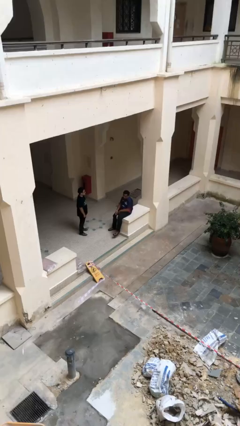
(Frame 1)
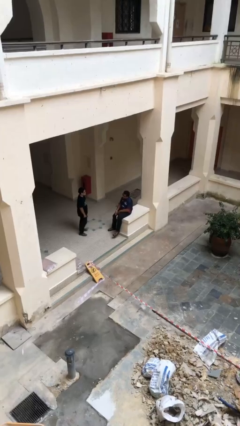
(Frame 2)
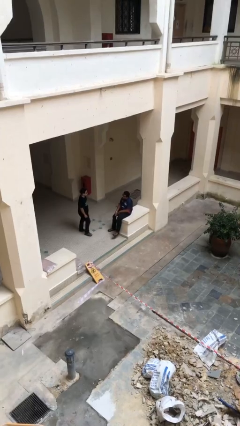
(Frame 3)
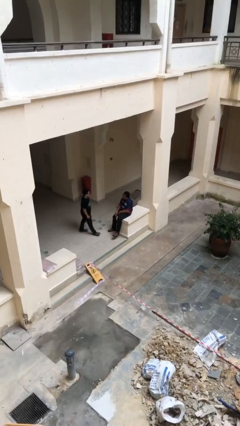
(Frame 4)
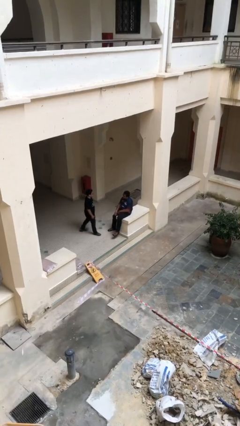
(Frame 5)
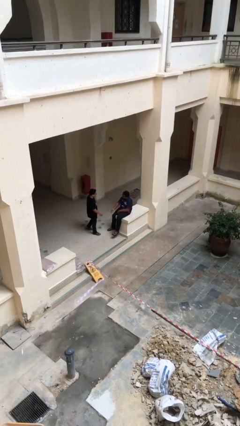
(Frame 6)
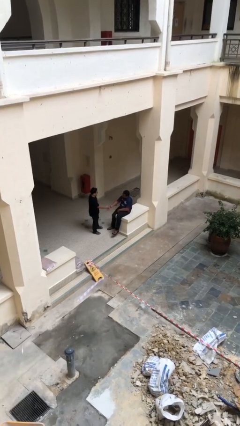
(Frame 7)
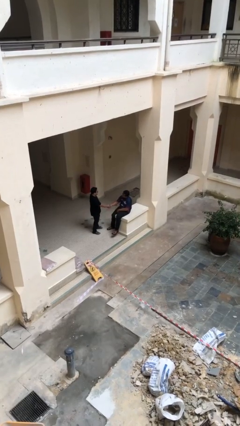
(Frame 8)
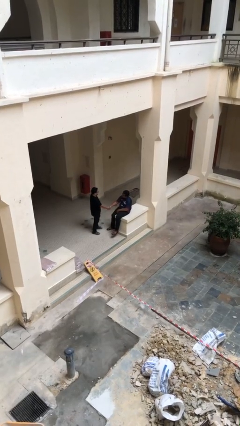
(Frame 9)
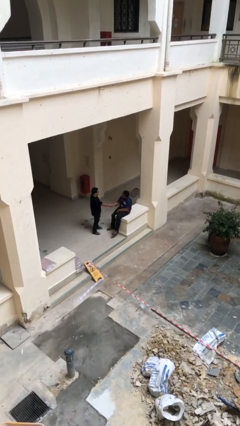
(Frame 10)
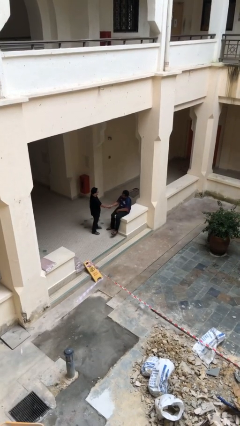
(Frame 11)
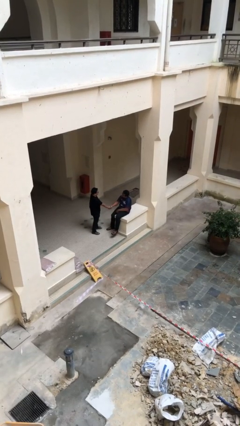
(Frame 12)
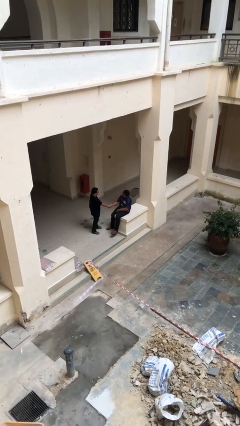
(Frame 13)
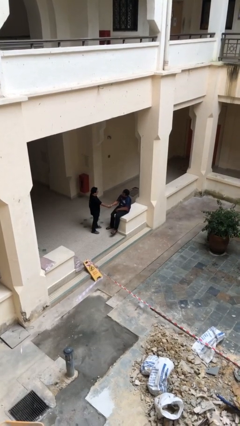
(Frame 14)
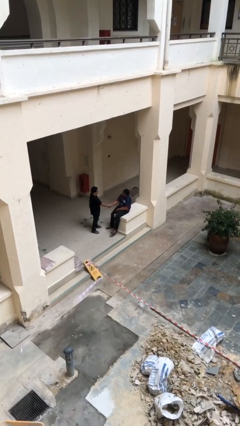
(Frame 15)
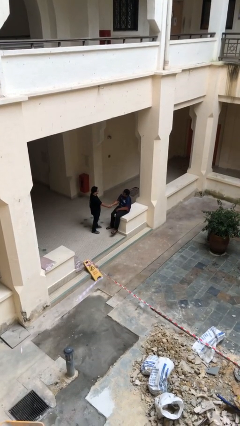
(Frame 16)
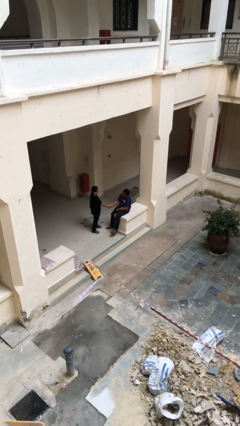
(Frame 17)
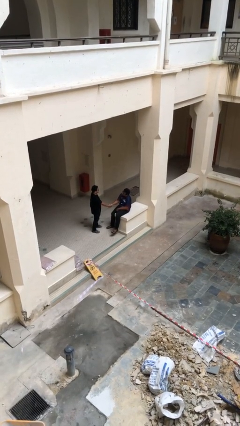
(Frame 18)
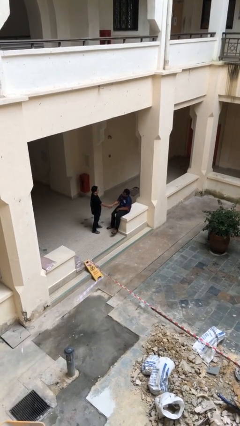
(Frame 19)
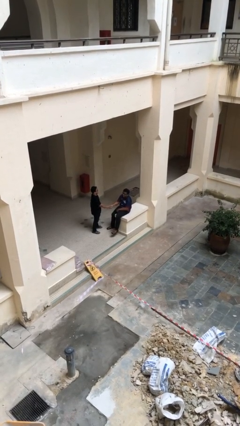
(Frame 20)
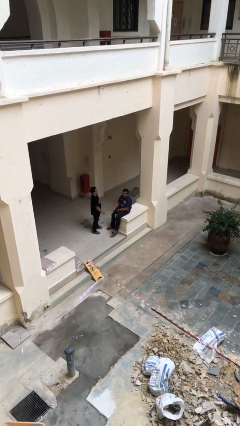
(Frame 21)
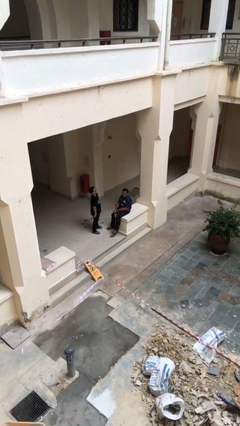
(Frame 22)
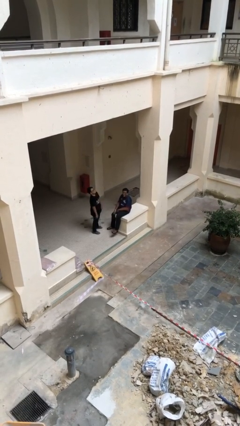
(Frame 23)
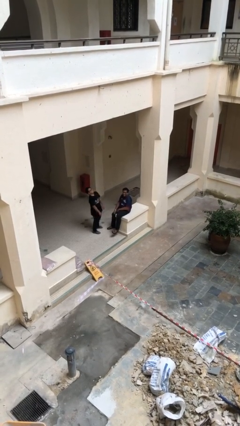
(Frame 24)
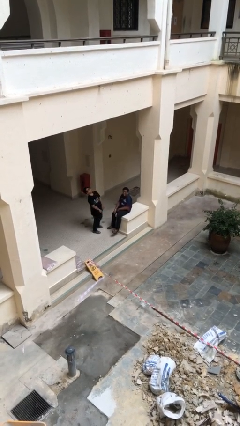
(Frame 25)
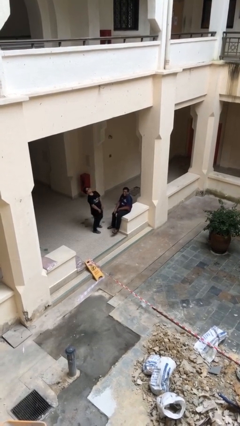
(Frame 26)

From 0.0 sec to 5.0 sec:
person shakes hand

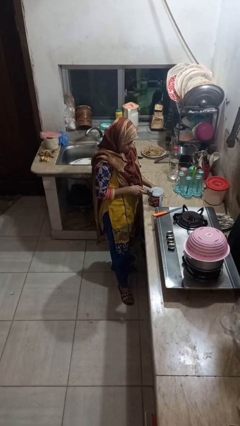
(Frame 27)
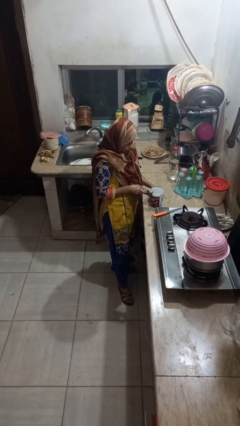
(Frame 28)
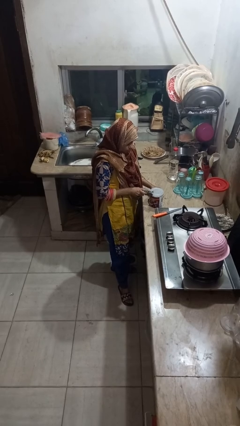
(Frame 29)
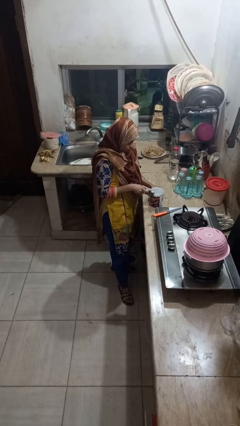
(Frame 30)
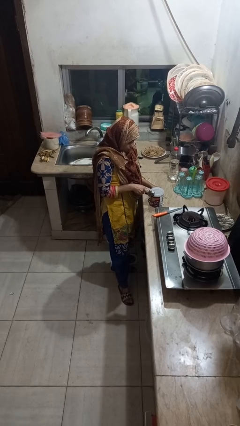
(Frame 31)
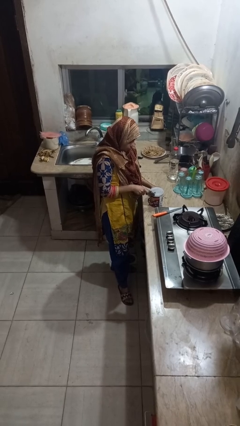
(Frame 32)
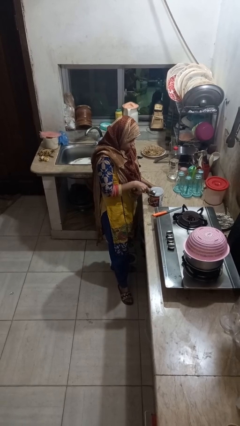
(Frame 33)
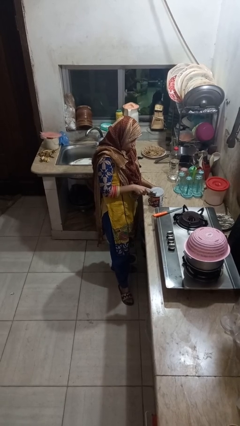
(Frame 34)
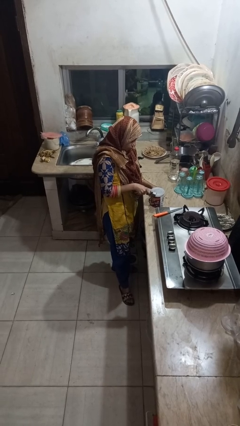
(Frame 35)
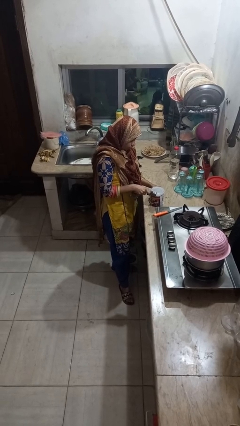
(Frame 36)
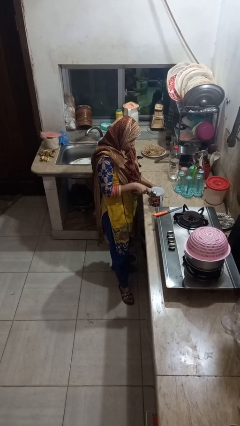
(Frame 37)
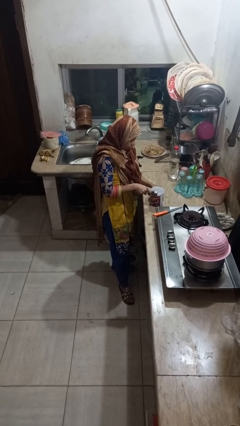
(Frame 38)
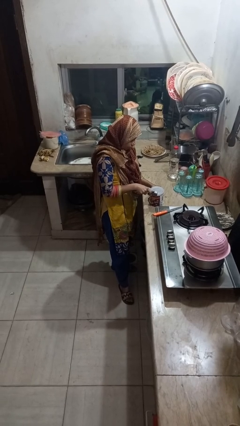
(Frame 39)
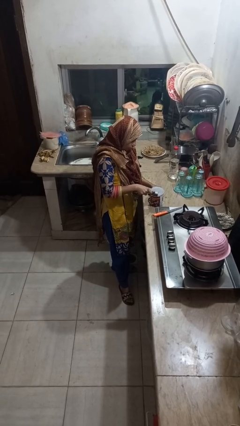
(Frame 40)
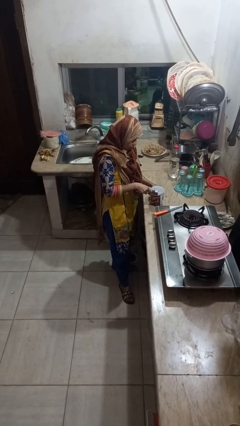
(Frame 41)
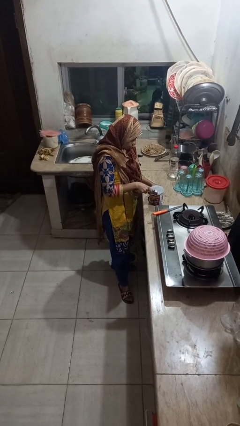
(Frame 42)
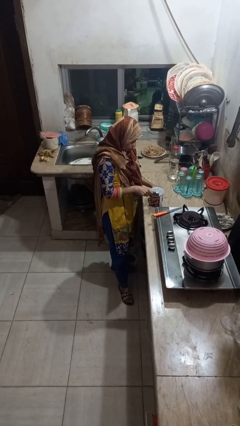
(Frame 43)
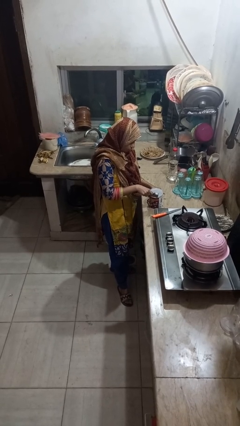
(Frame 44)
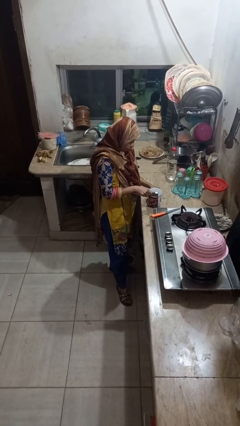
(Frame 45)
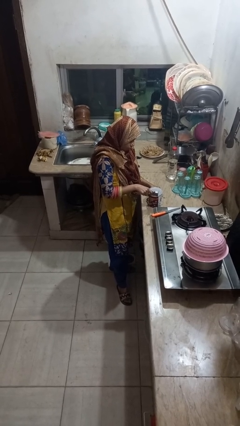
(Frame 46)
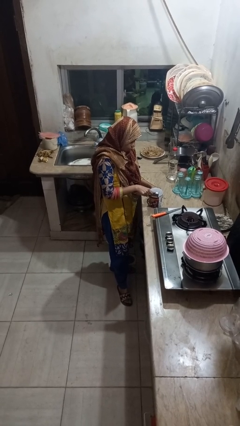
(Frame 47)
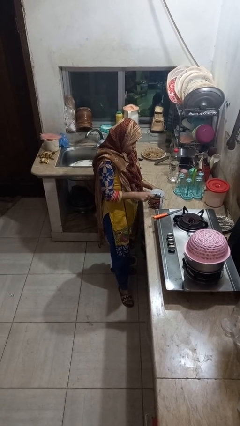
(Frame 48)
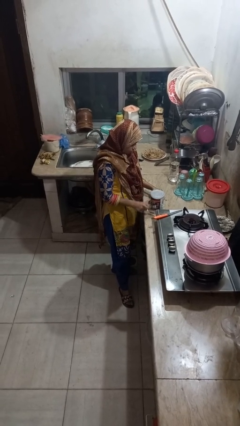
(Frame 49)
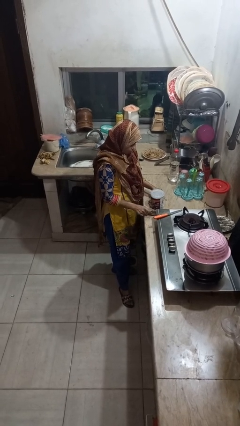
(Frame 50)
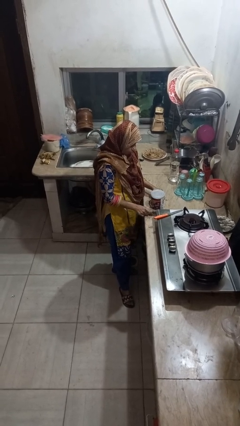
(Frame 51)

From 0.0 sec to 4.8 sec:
person opens can with can opener

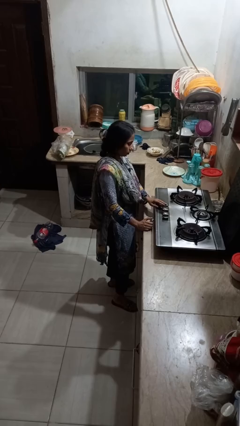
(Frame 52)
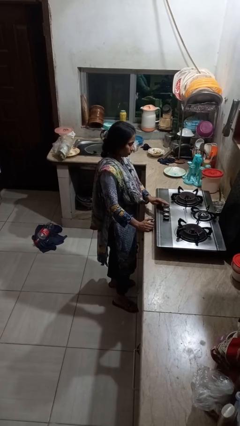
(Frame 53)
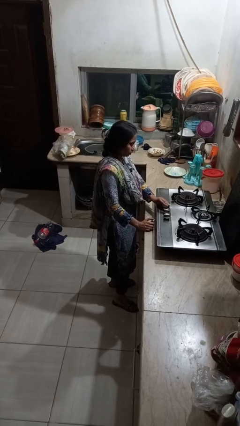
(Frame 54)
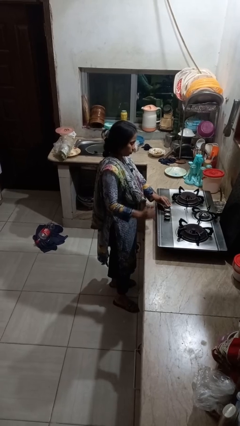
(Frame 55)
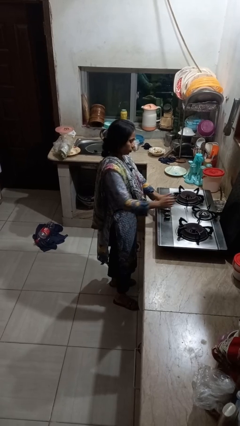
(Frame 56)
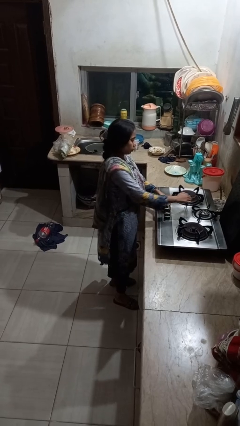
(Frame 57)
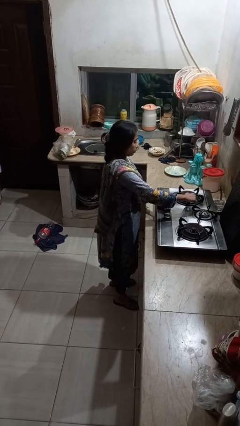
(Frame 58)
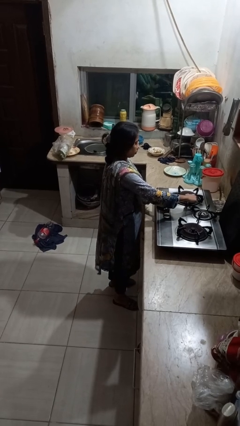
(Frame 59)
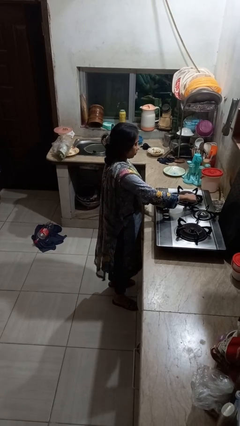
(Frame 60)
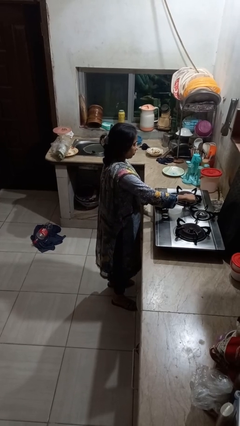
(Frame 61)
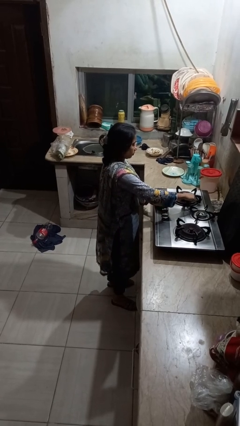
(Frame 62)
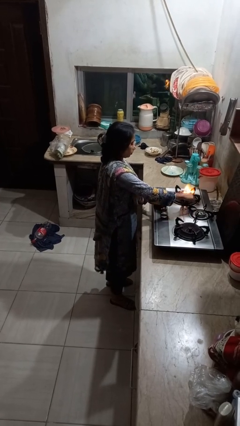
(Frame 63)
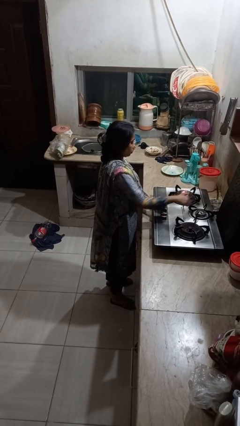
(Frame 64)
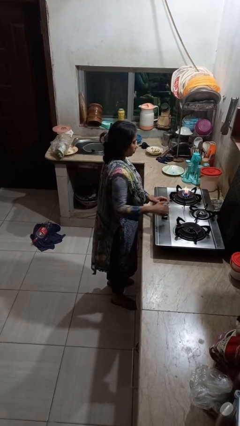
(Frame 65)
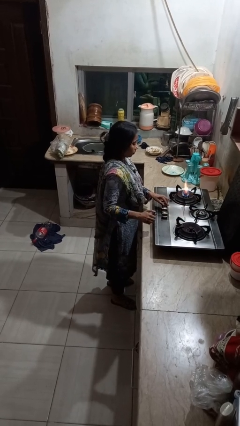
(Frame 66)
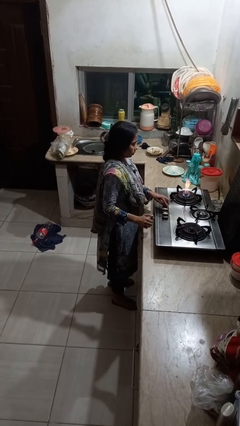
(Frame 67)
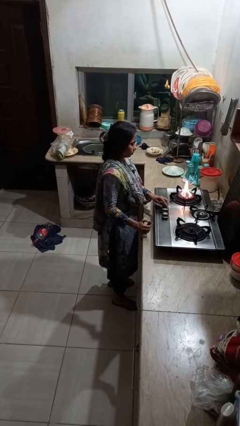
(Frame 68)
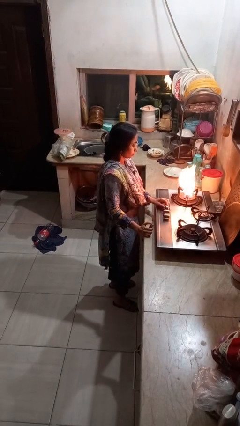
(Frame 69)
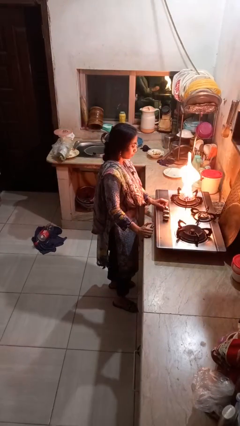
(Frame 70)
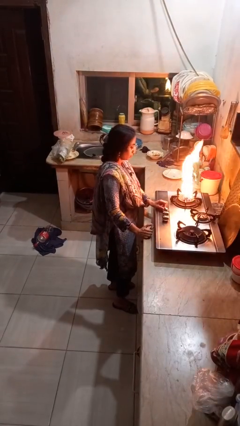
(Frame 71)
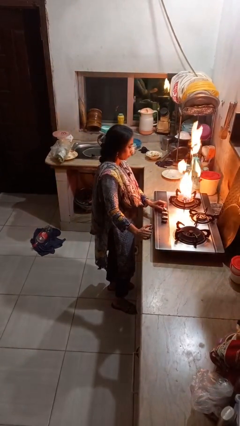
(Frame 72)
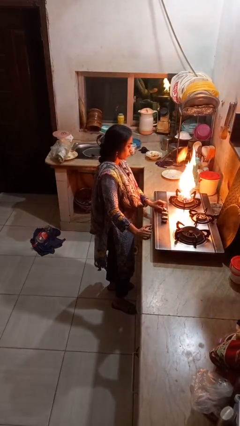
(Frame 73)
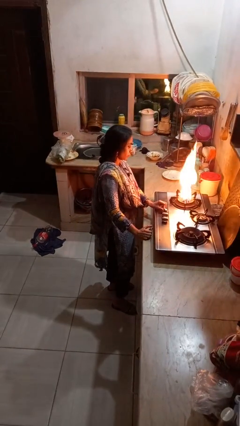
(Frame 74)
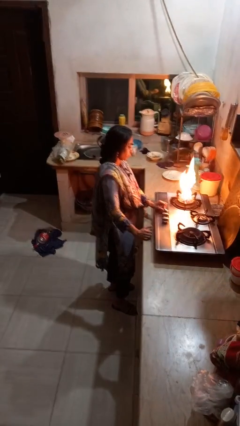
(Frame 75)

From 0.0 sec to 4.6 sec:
person turns on stovetop

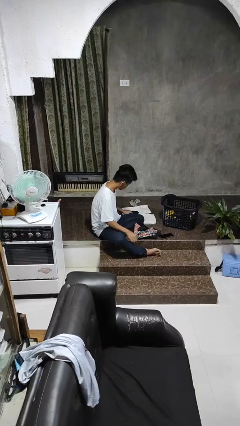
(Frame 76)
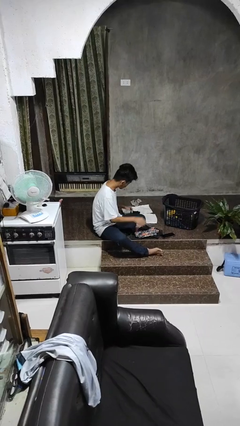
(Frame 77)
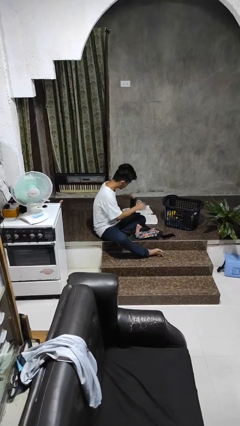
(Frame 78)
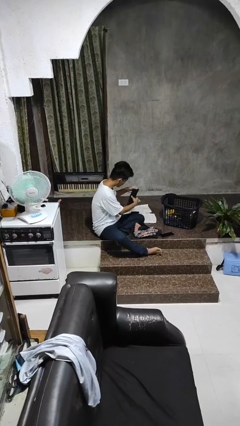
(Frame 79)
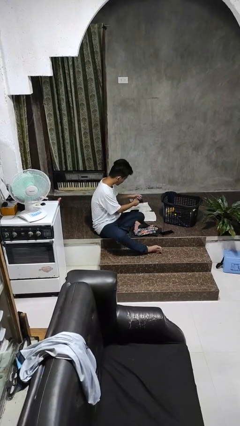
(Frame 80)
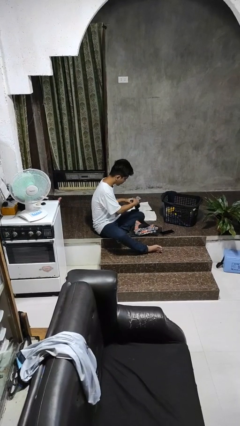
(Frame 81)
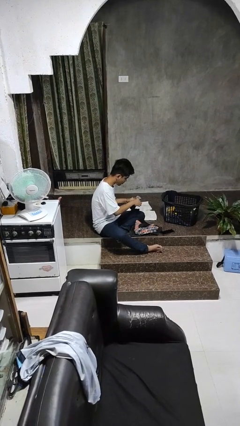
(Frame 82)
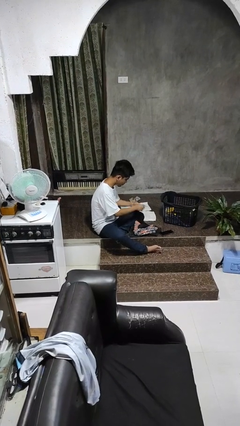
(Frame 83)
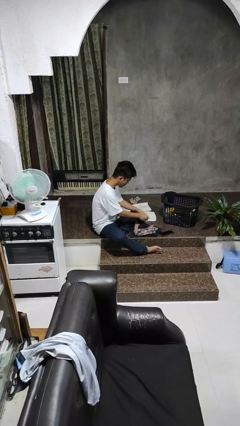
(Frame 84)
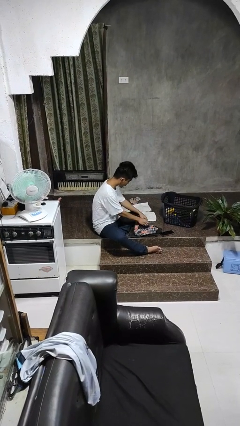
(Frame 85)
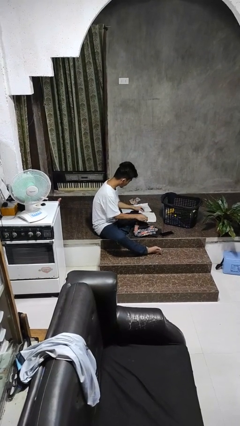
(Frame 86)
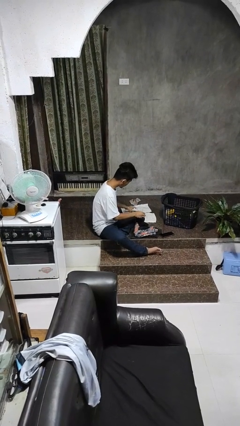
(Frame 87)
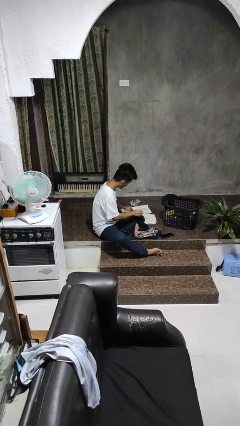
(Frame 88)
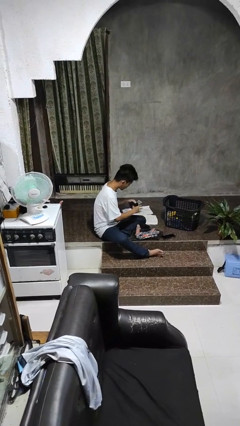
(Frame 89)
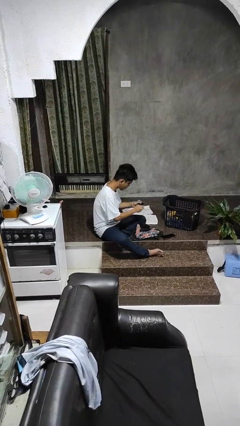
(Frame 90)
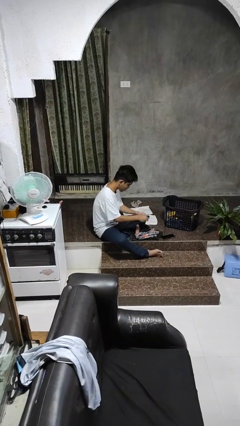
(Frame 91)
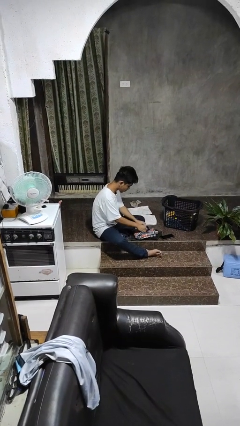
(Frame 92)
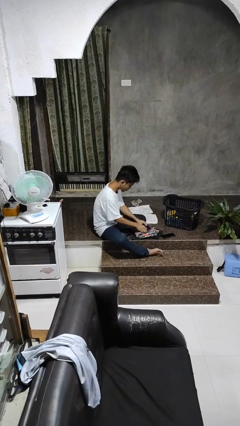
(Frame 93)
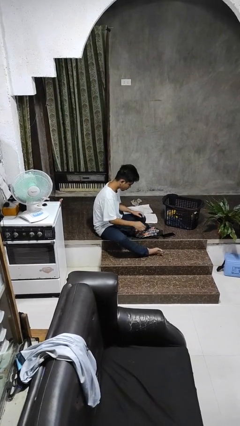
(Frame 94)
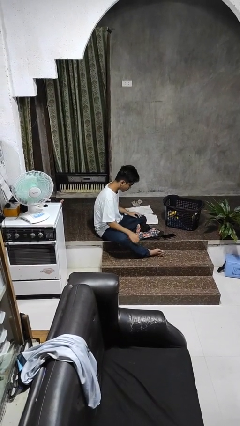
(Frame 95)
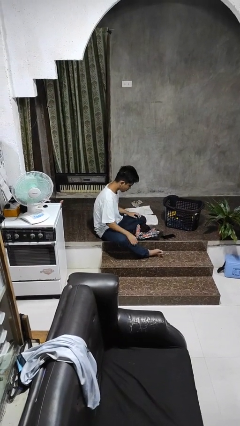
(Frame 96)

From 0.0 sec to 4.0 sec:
person folds socks
